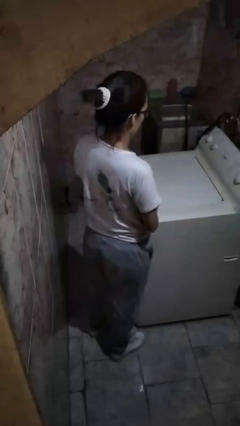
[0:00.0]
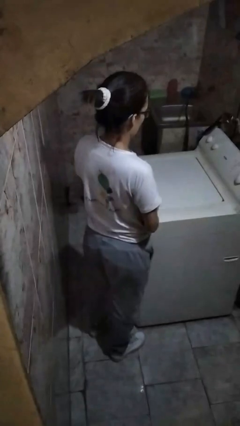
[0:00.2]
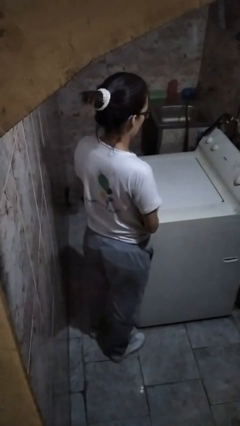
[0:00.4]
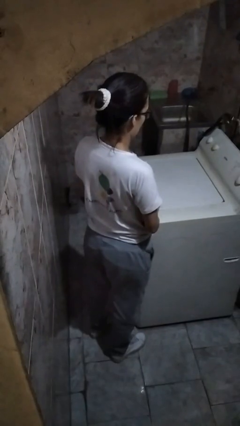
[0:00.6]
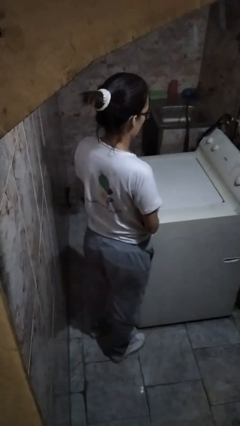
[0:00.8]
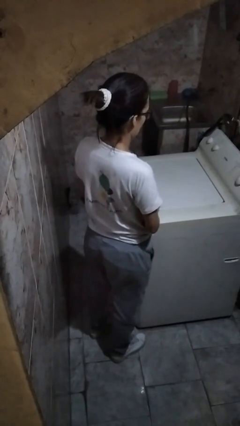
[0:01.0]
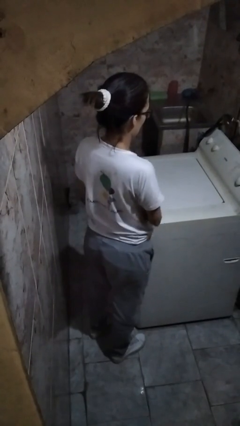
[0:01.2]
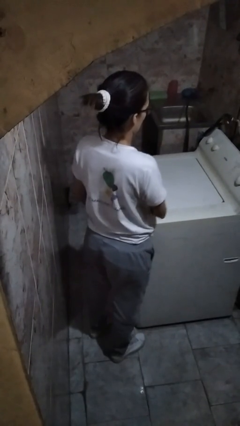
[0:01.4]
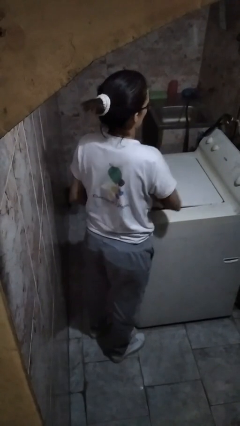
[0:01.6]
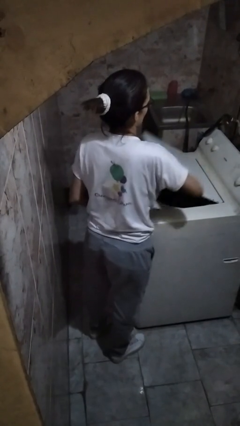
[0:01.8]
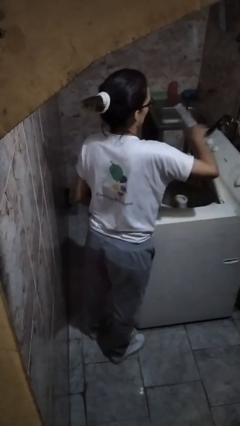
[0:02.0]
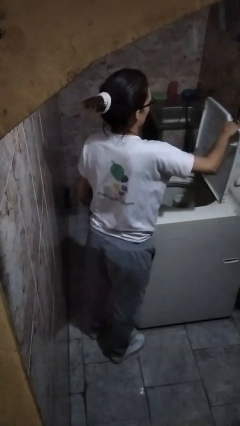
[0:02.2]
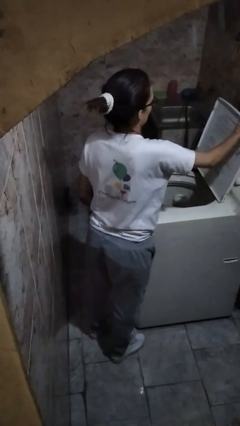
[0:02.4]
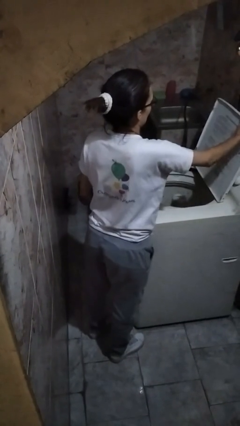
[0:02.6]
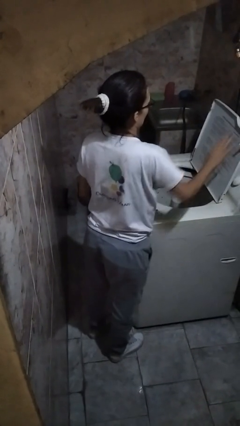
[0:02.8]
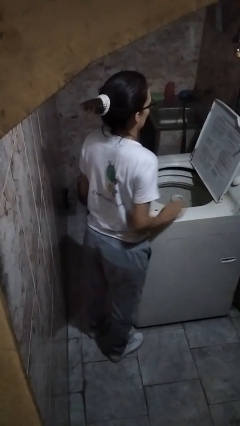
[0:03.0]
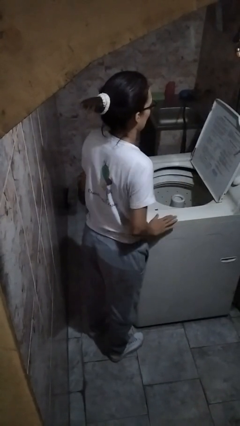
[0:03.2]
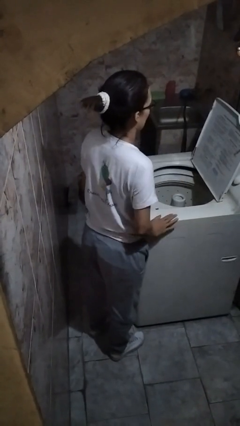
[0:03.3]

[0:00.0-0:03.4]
person opens clothes washer

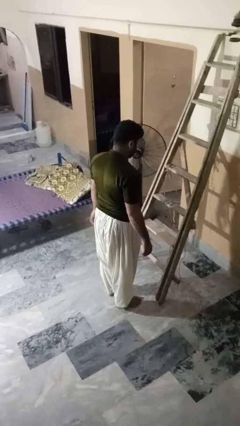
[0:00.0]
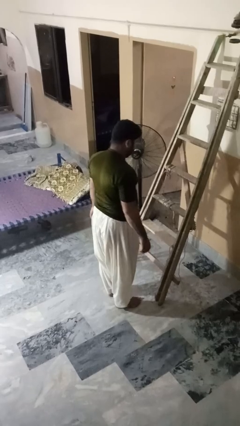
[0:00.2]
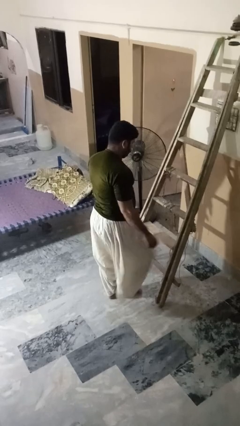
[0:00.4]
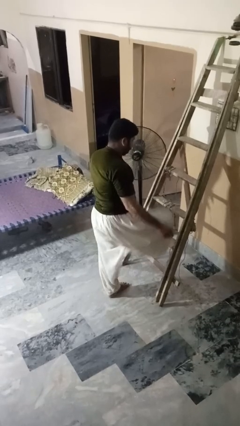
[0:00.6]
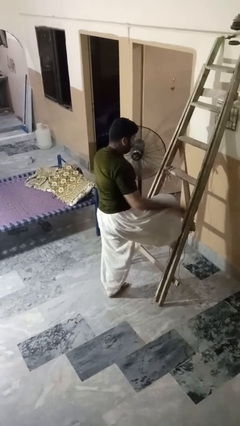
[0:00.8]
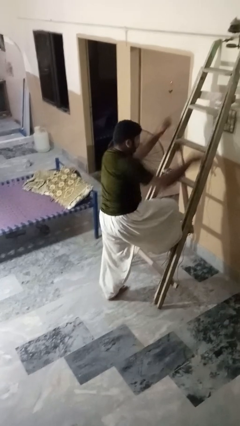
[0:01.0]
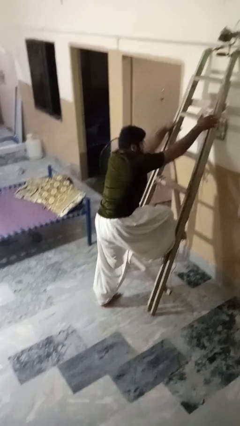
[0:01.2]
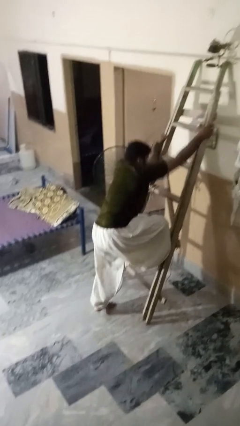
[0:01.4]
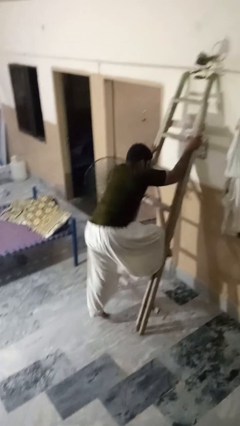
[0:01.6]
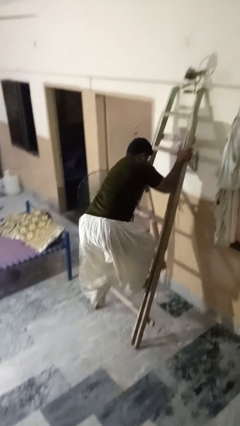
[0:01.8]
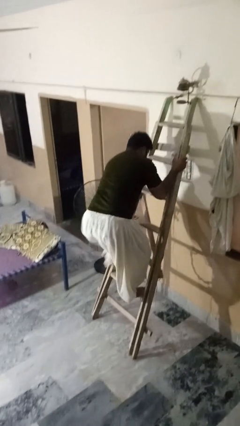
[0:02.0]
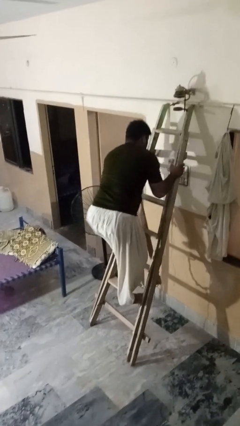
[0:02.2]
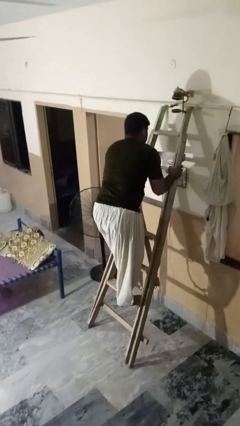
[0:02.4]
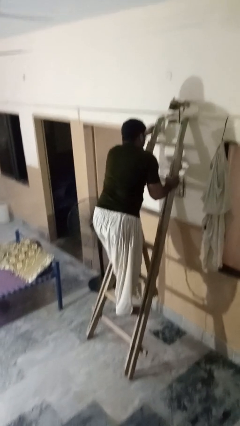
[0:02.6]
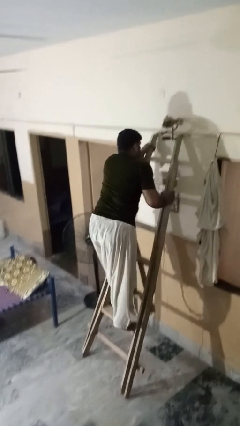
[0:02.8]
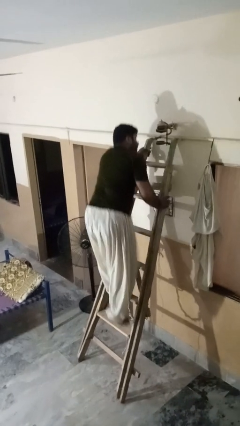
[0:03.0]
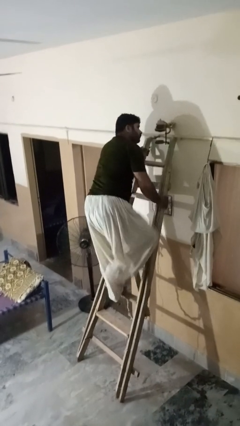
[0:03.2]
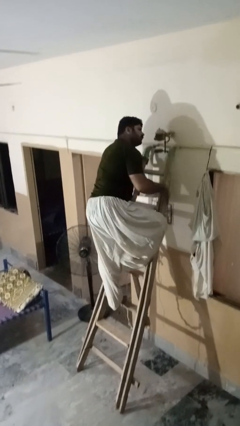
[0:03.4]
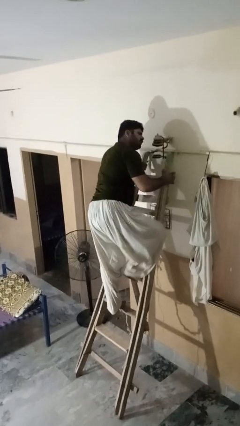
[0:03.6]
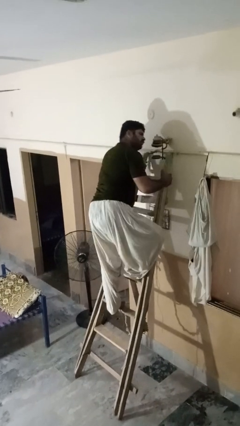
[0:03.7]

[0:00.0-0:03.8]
person climbs up ladder

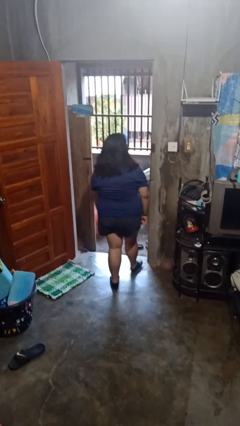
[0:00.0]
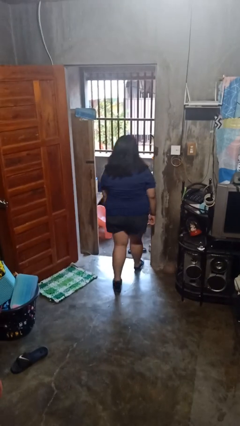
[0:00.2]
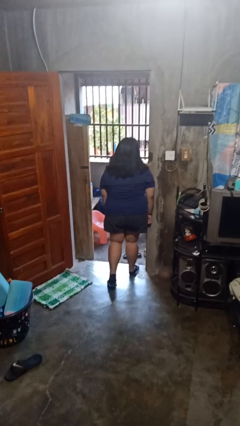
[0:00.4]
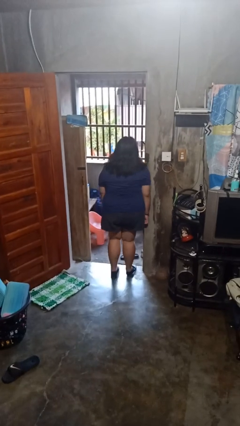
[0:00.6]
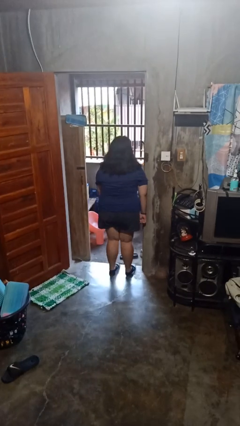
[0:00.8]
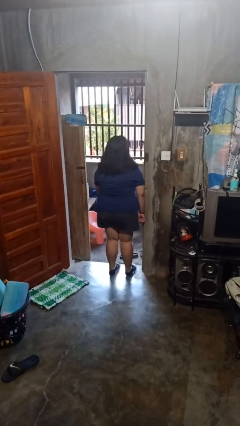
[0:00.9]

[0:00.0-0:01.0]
person bumps into wall

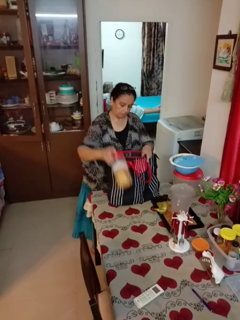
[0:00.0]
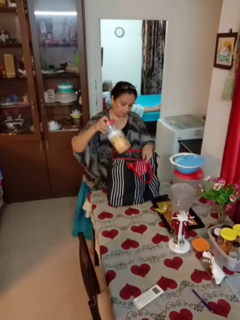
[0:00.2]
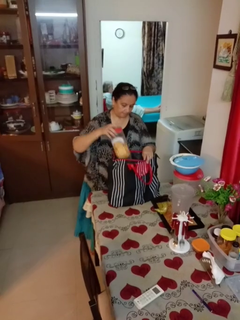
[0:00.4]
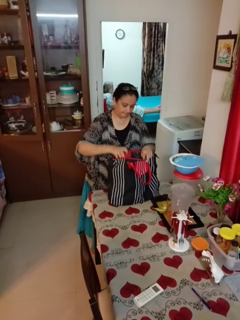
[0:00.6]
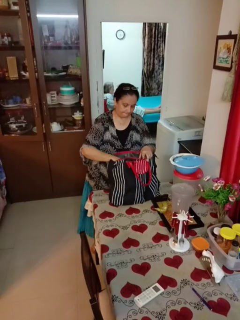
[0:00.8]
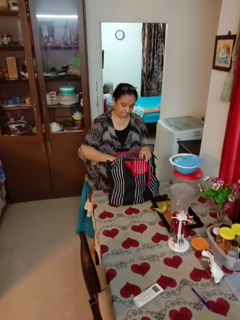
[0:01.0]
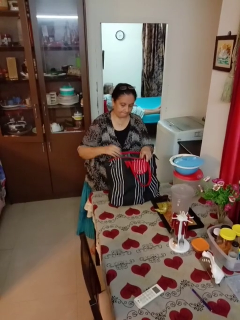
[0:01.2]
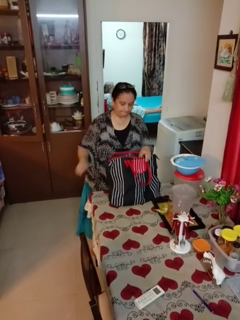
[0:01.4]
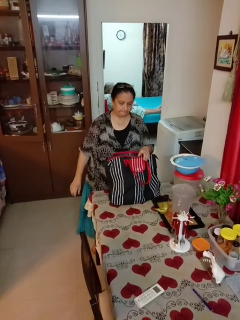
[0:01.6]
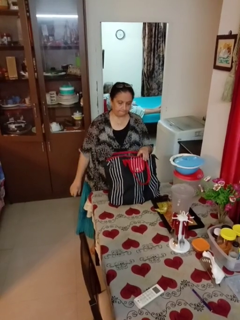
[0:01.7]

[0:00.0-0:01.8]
person puts object into bag

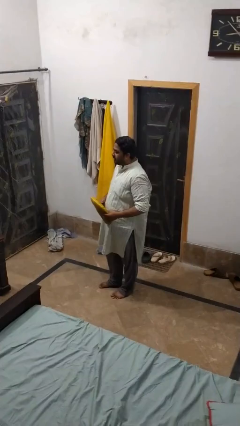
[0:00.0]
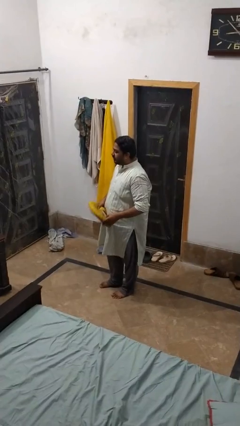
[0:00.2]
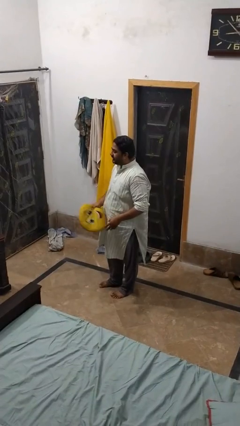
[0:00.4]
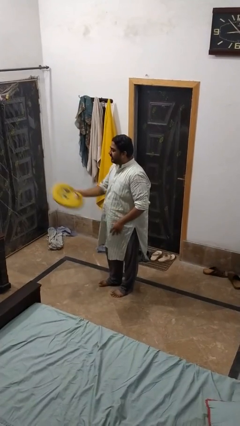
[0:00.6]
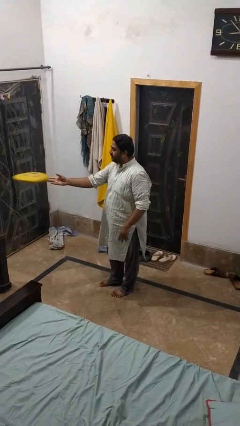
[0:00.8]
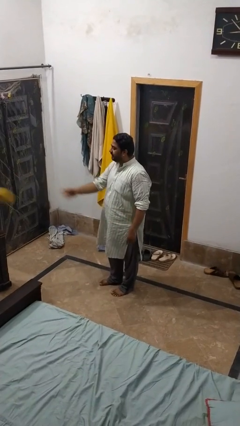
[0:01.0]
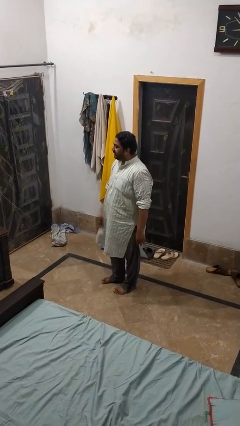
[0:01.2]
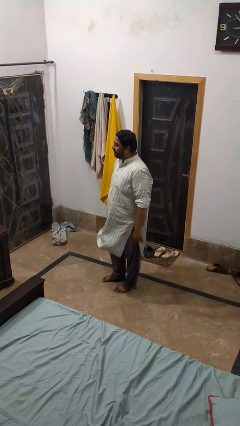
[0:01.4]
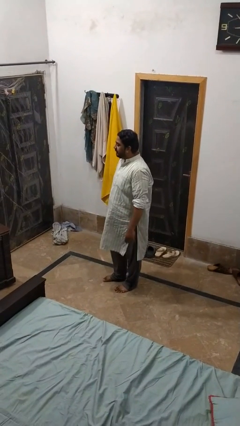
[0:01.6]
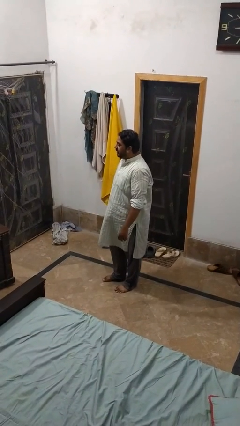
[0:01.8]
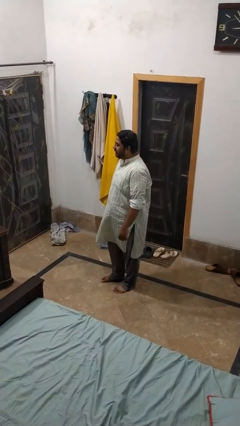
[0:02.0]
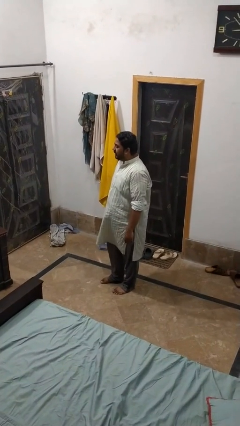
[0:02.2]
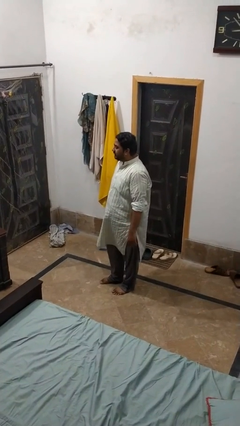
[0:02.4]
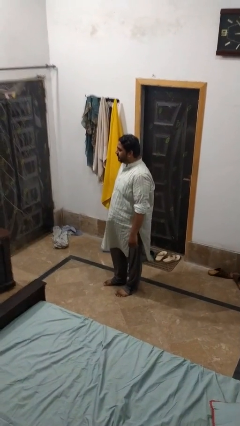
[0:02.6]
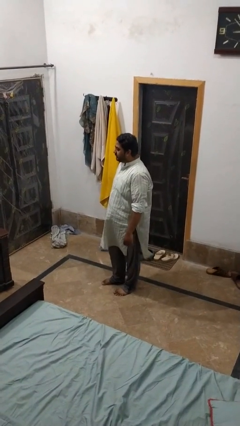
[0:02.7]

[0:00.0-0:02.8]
person throws object on table

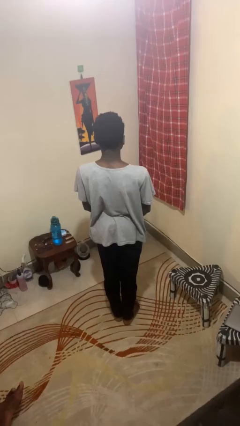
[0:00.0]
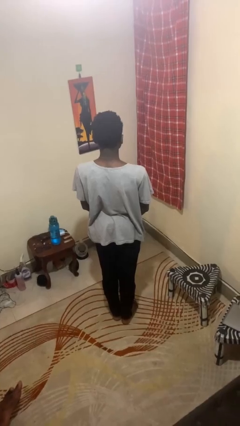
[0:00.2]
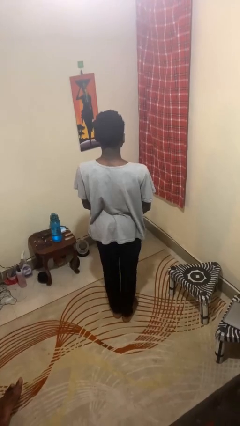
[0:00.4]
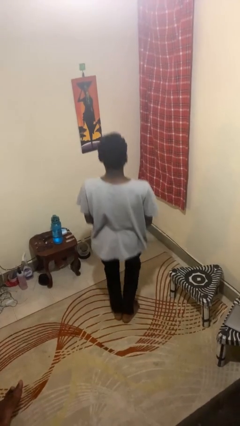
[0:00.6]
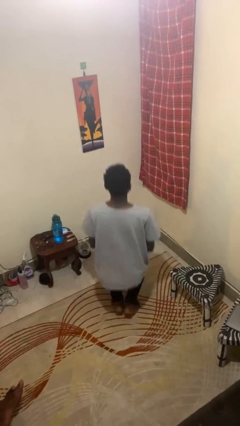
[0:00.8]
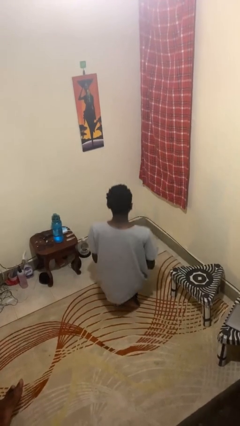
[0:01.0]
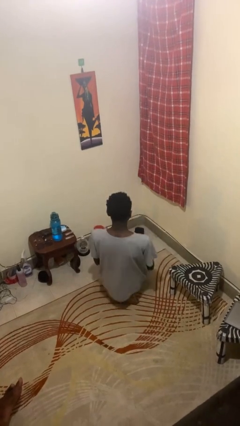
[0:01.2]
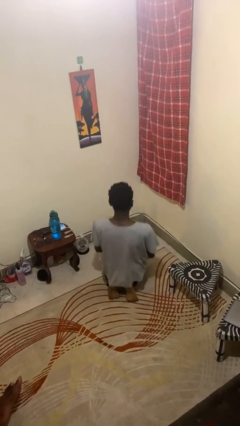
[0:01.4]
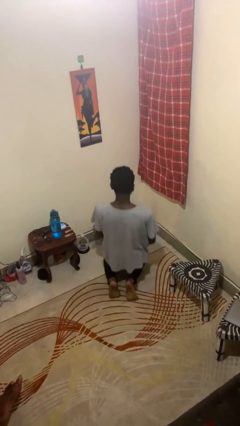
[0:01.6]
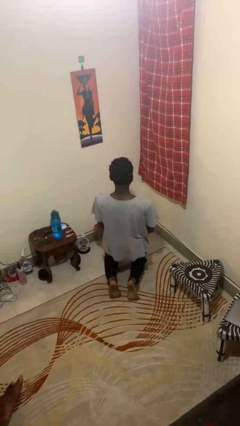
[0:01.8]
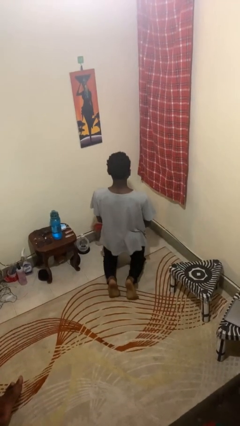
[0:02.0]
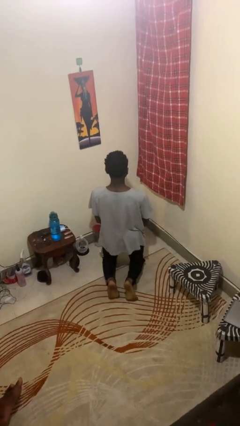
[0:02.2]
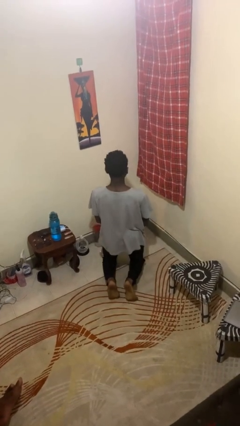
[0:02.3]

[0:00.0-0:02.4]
person kneels

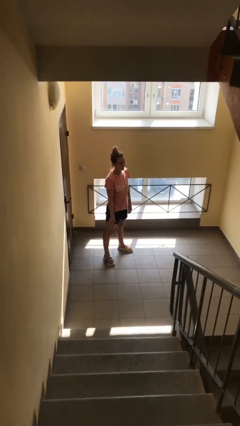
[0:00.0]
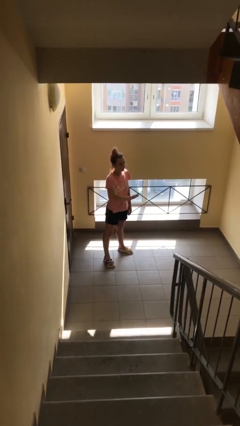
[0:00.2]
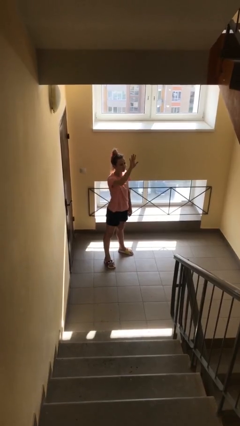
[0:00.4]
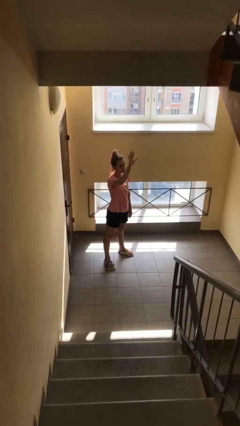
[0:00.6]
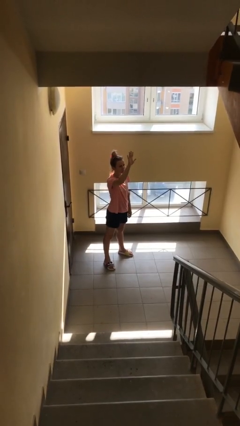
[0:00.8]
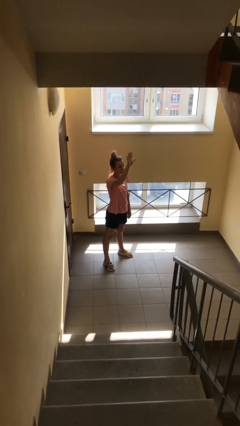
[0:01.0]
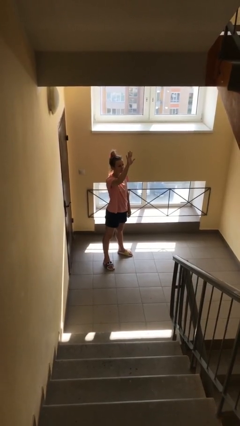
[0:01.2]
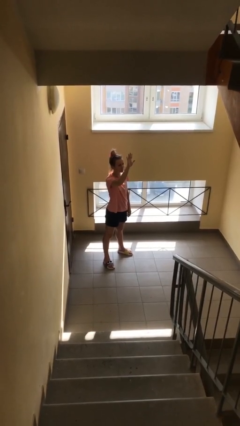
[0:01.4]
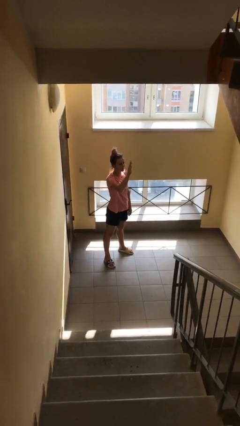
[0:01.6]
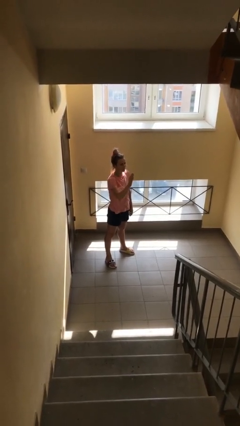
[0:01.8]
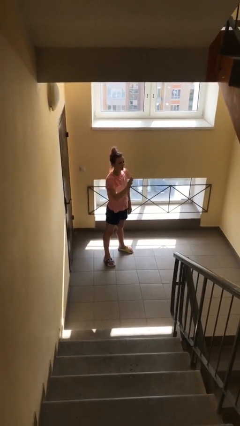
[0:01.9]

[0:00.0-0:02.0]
person gestures raise hand

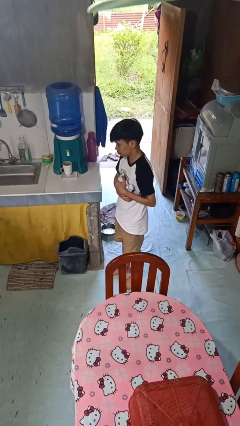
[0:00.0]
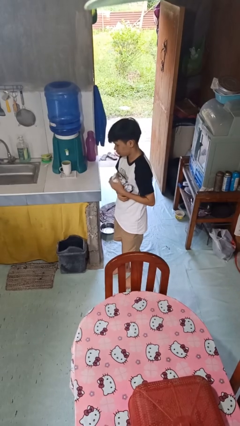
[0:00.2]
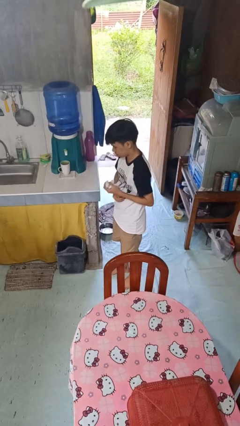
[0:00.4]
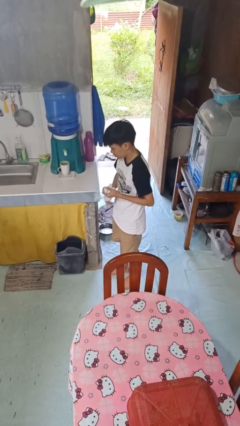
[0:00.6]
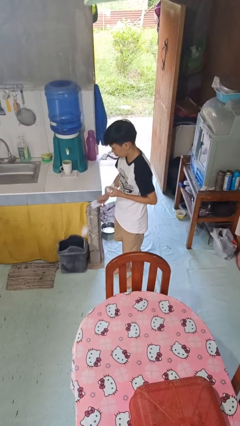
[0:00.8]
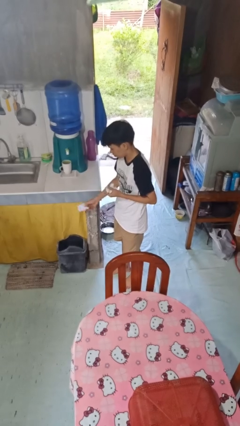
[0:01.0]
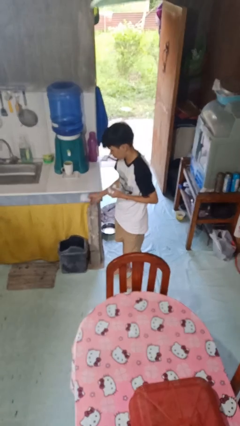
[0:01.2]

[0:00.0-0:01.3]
person discards trash
